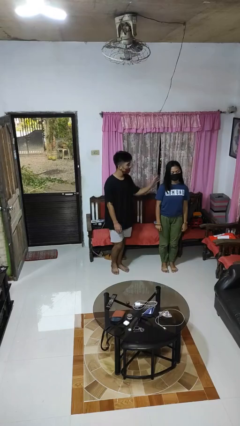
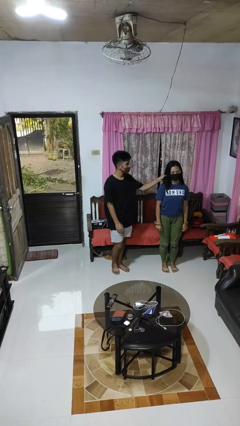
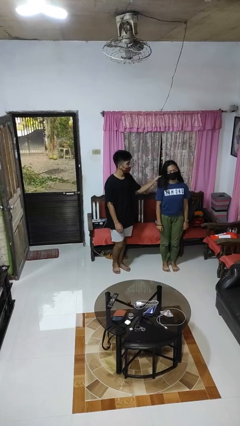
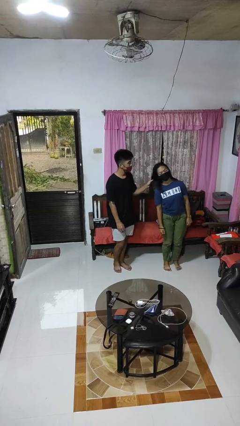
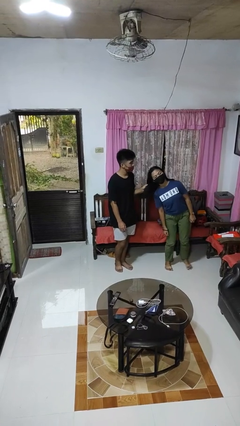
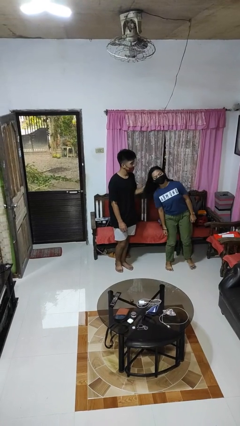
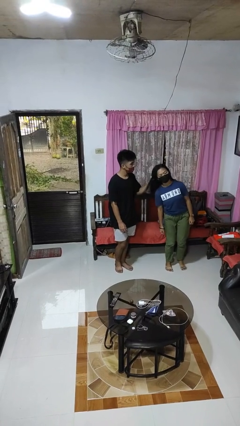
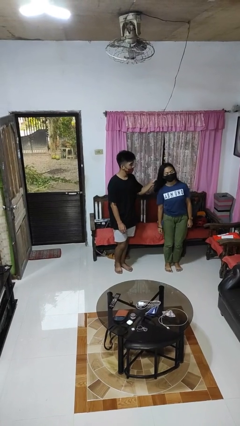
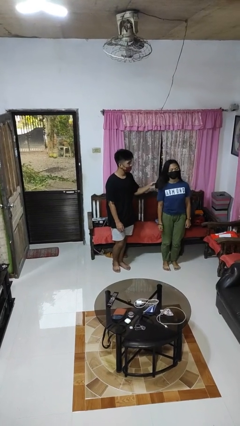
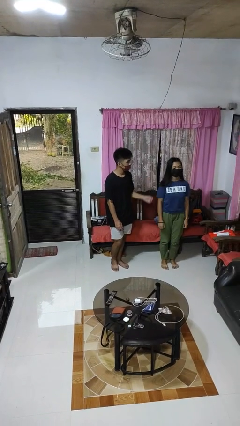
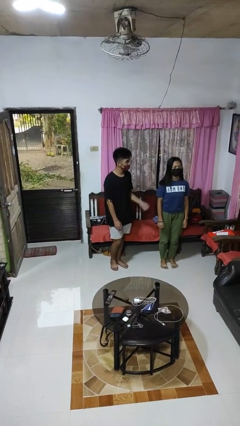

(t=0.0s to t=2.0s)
person grabs person by hair

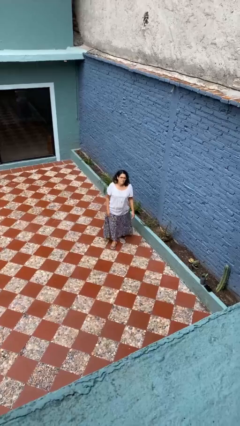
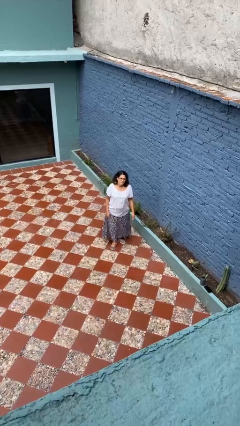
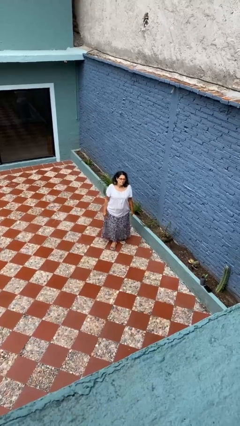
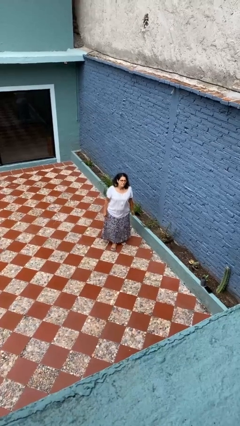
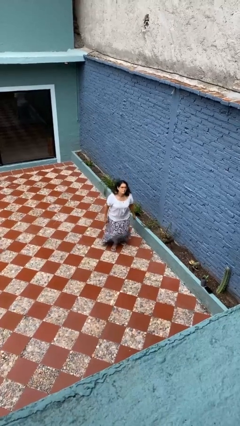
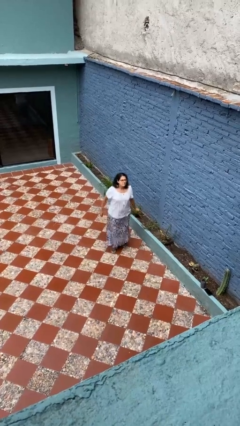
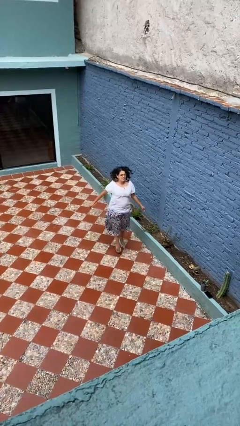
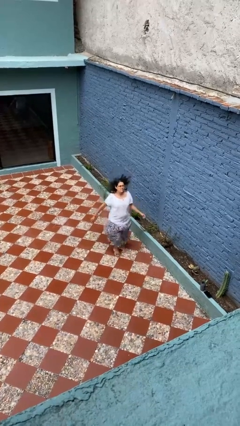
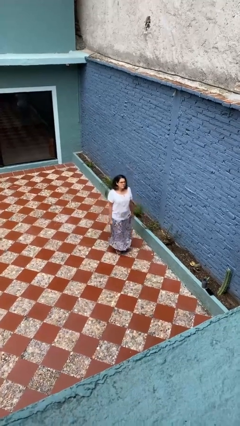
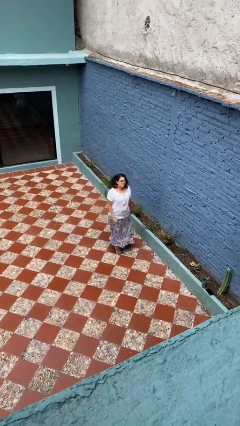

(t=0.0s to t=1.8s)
person jumps

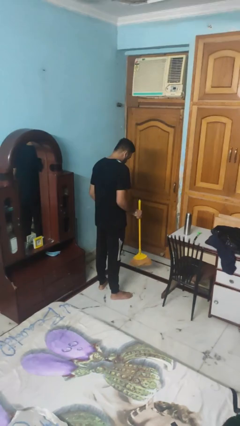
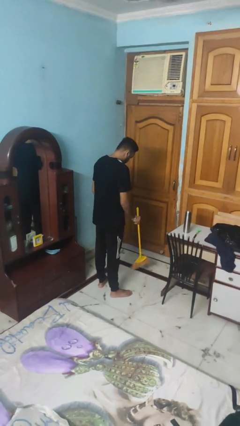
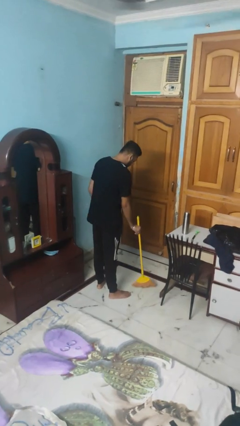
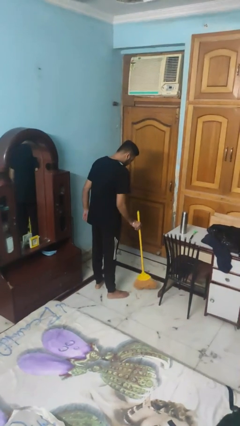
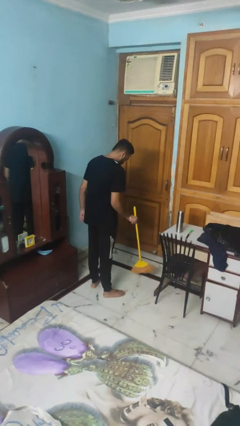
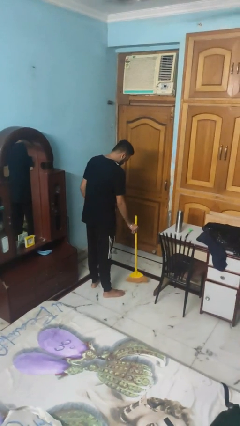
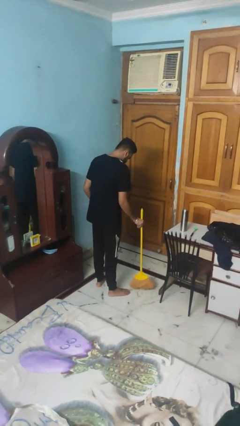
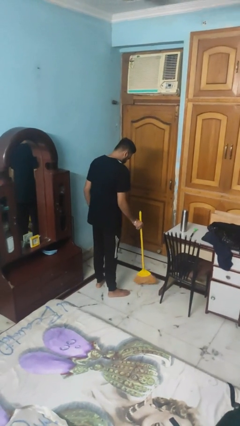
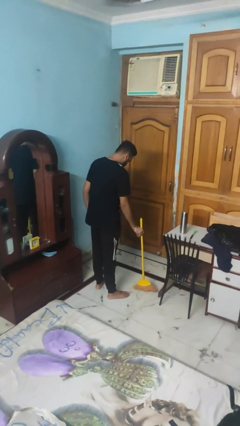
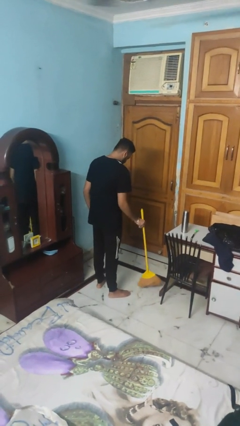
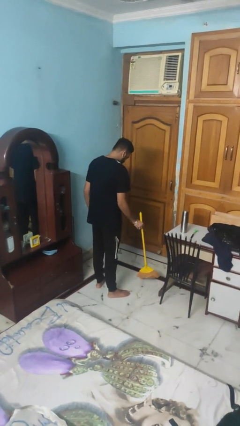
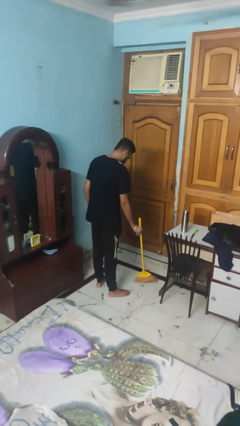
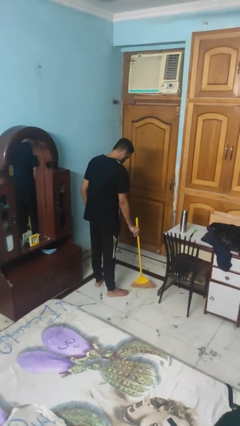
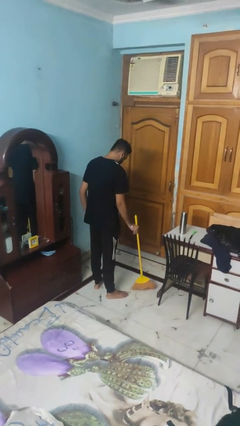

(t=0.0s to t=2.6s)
person sweeps floor

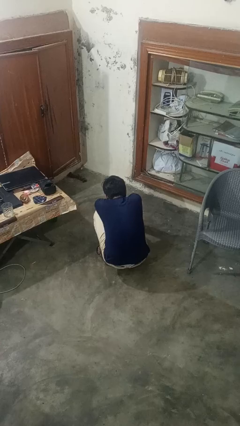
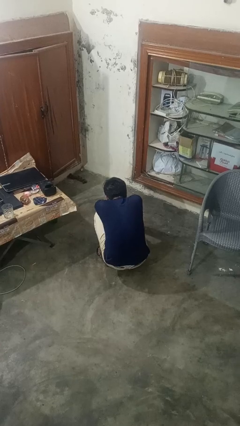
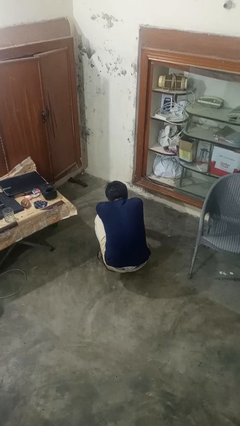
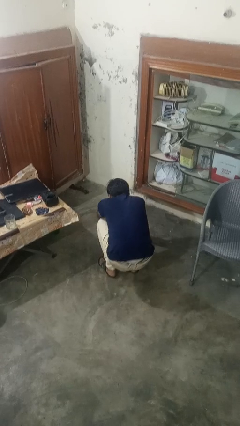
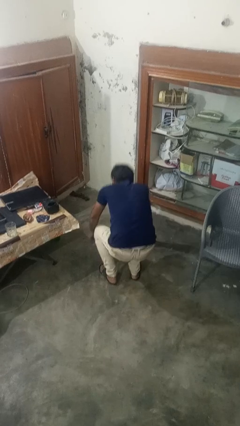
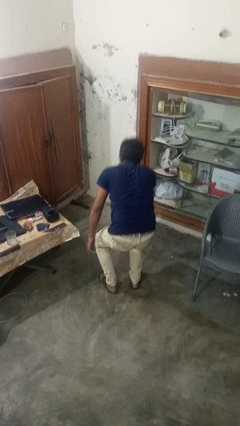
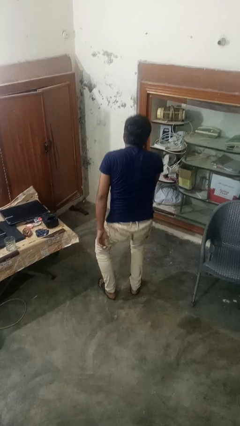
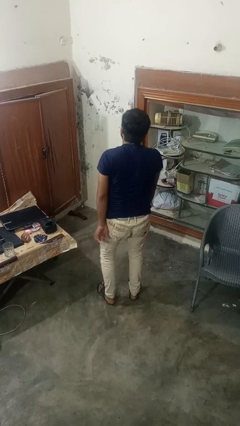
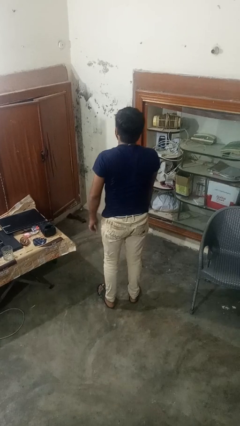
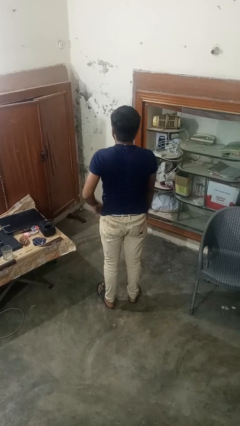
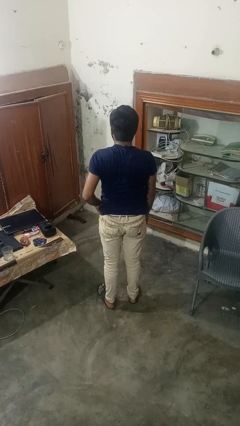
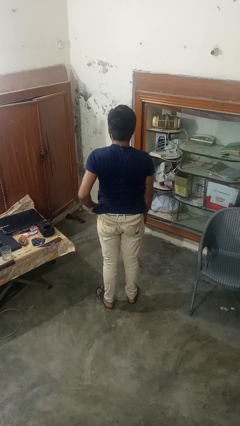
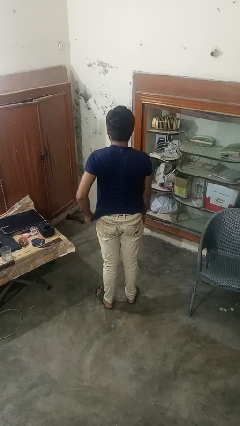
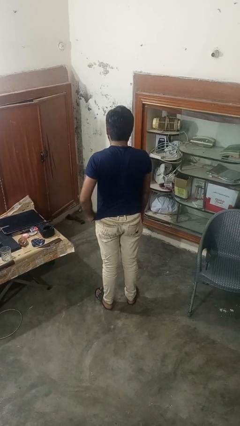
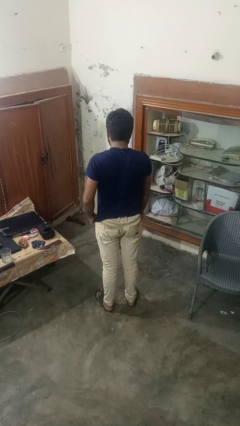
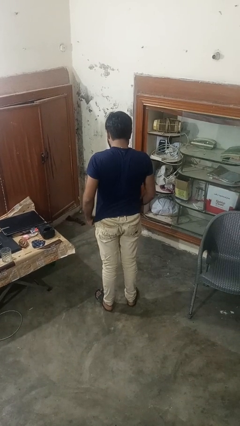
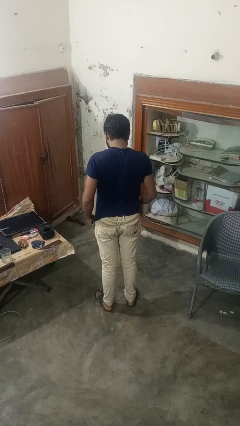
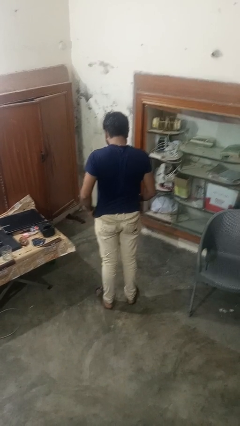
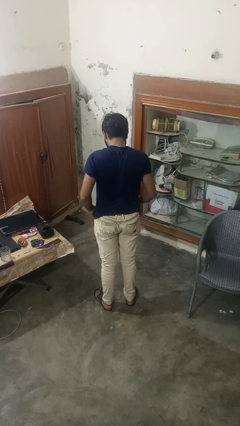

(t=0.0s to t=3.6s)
person stands up

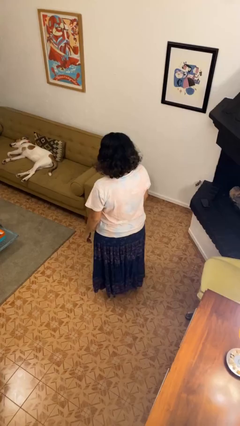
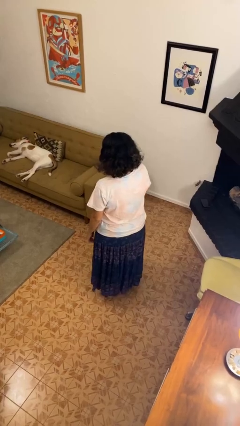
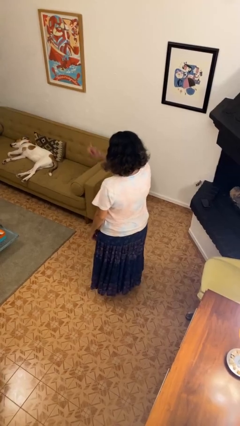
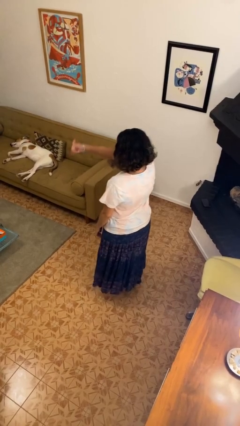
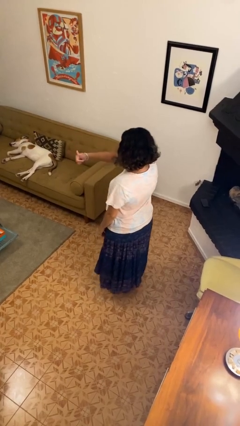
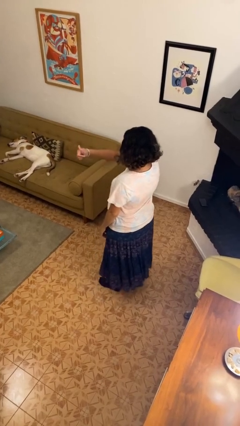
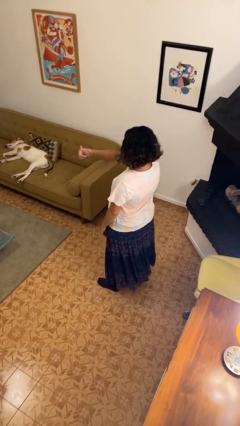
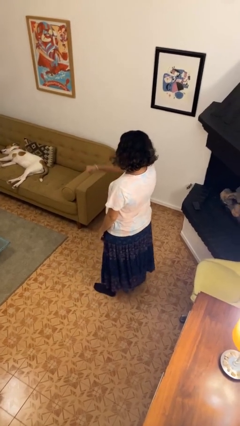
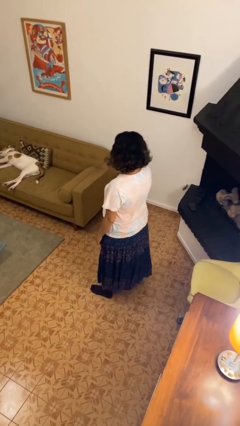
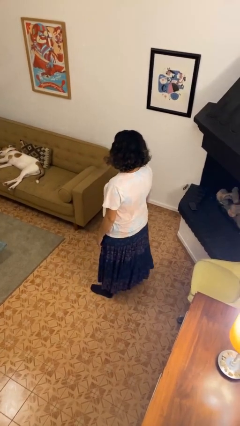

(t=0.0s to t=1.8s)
person gestures thumbs up

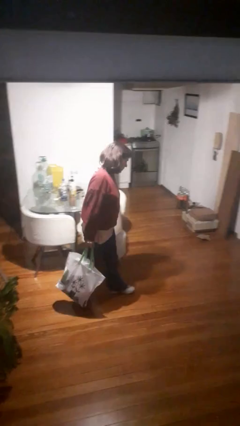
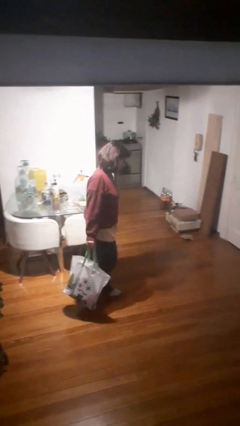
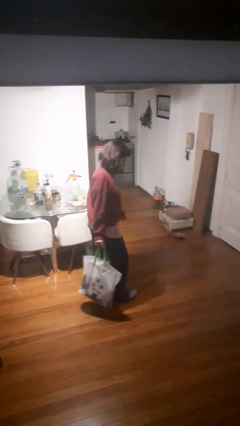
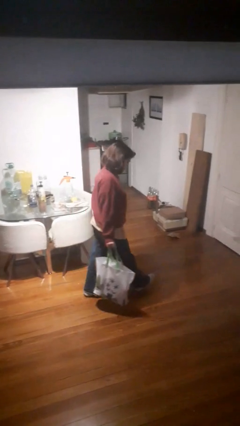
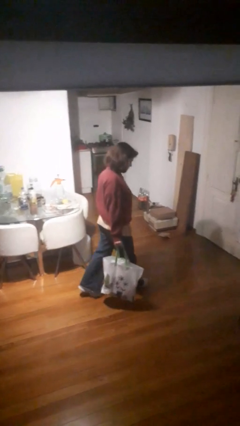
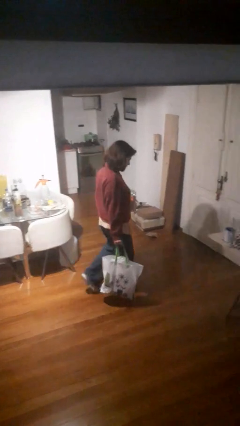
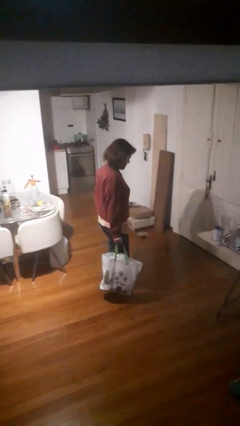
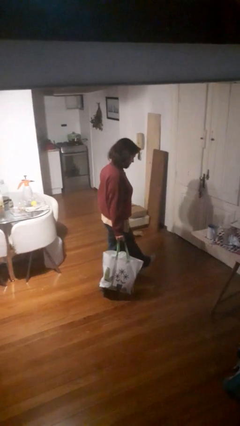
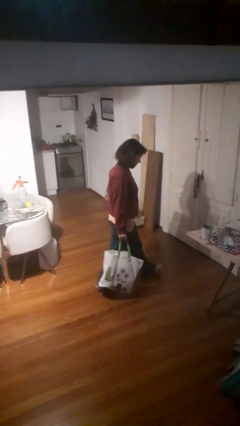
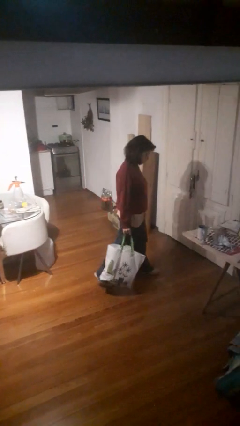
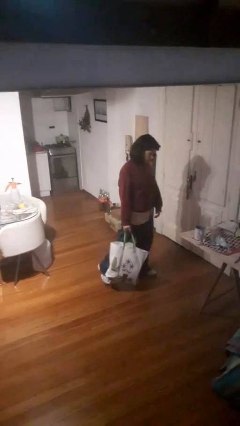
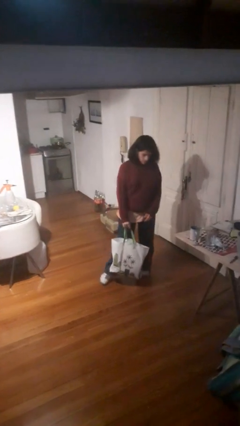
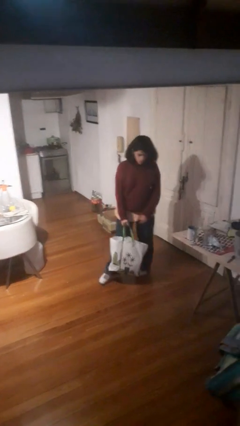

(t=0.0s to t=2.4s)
person carries groceries

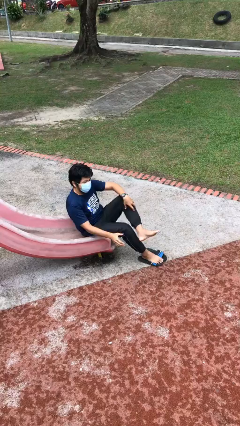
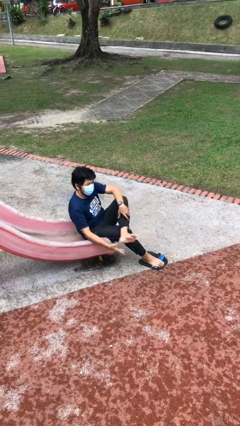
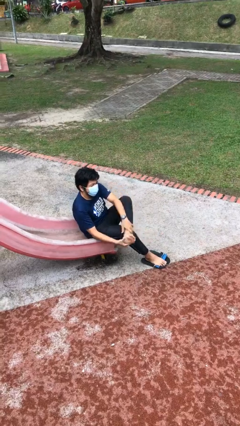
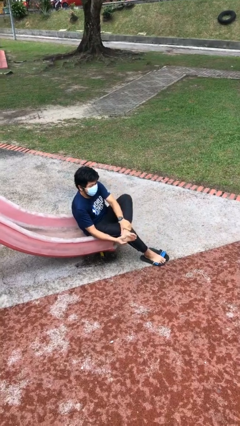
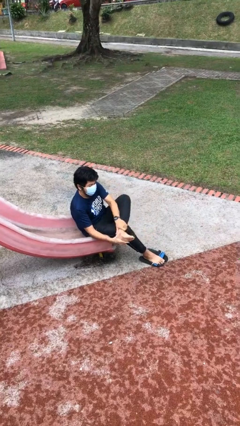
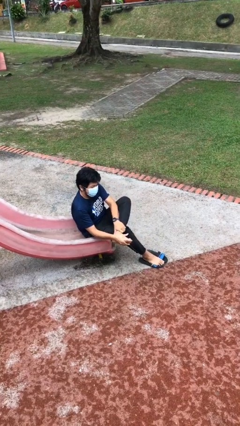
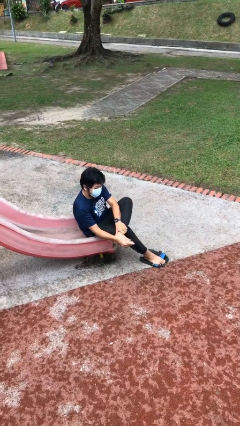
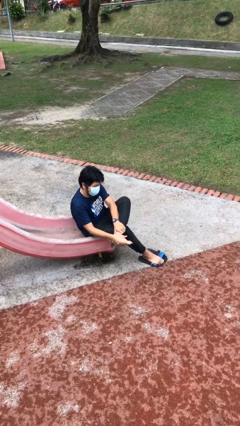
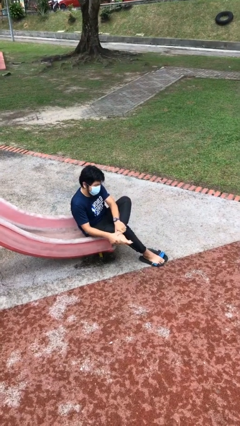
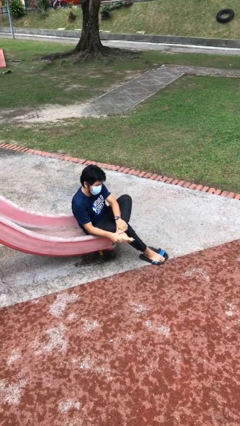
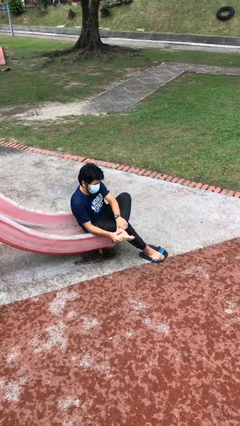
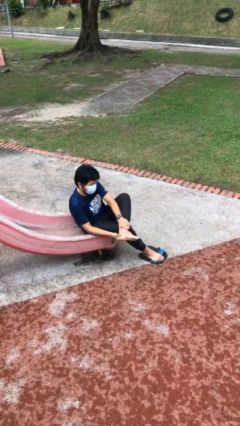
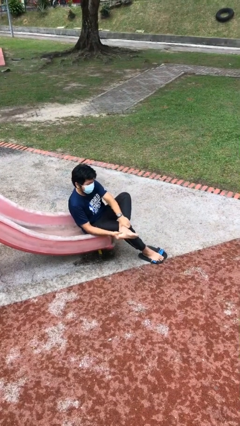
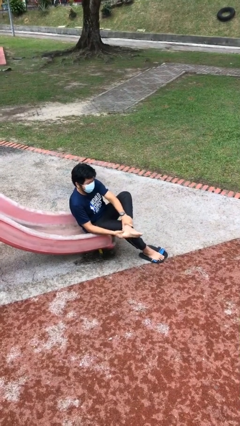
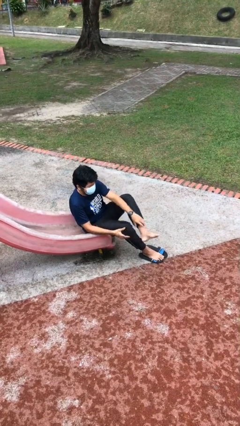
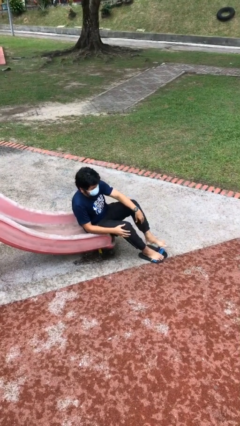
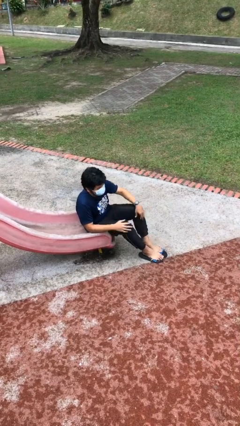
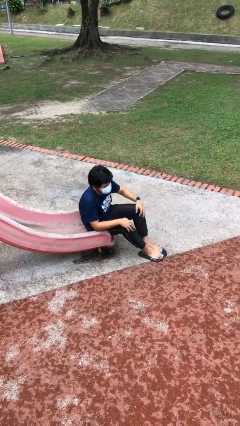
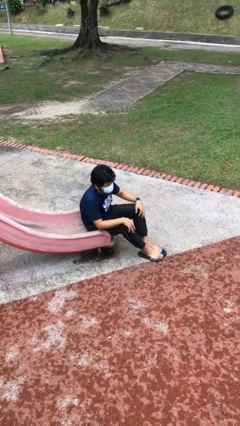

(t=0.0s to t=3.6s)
person rubs foot
